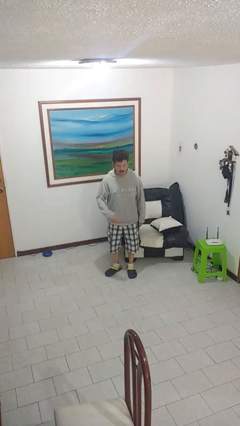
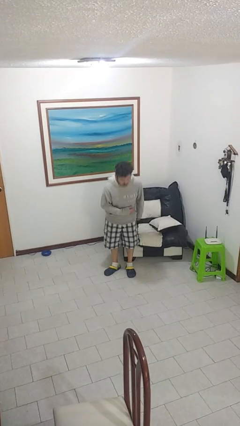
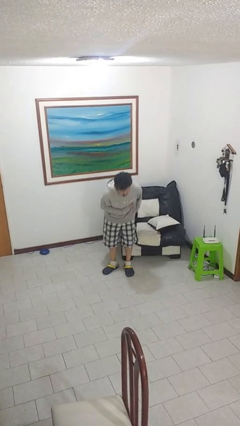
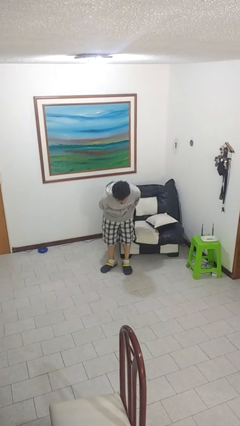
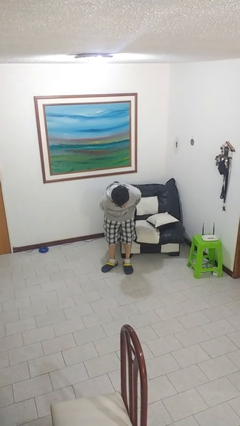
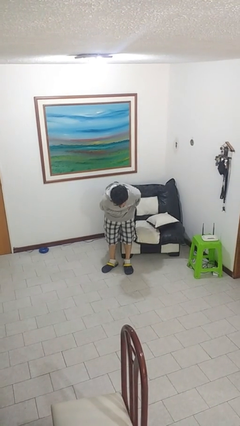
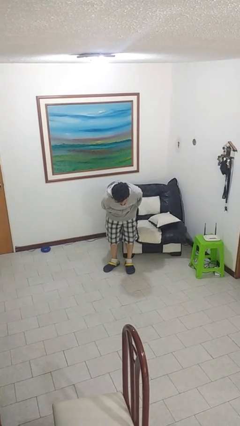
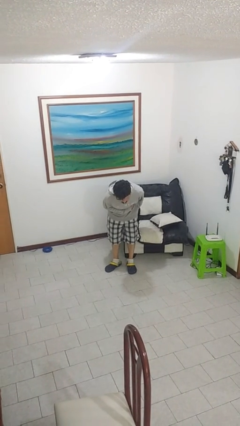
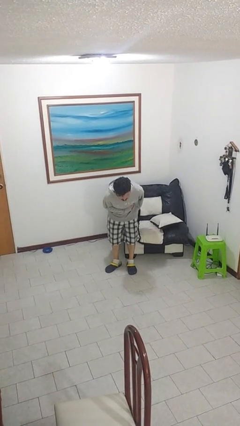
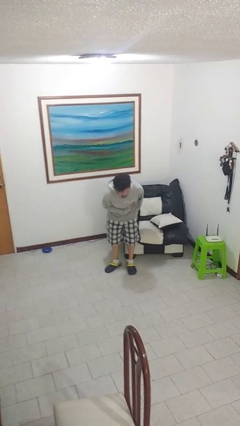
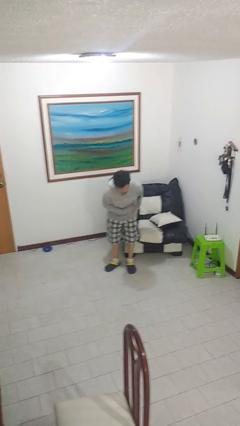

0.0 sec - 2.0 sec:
person bows

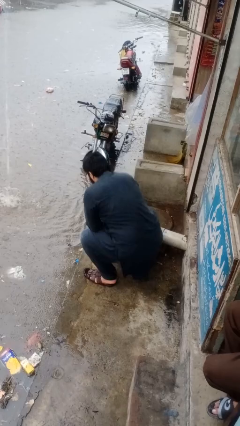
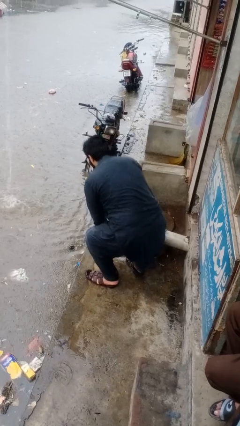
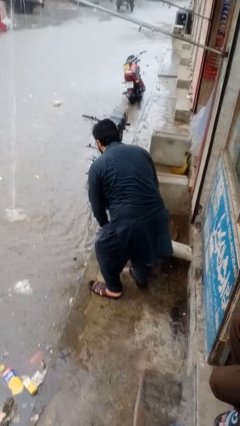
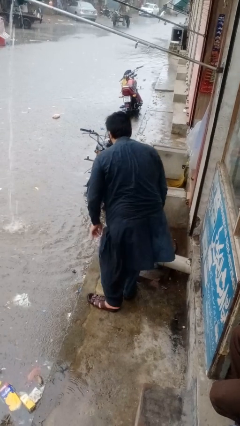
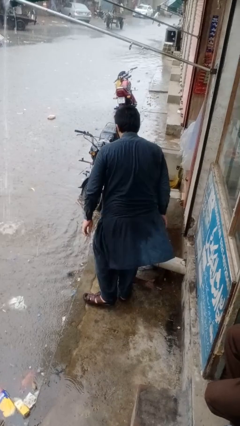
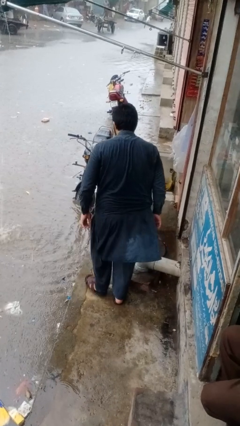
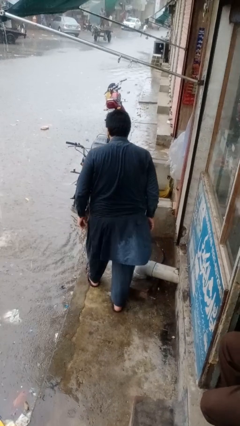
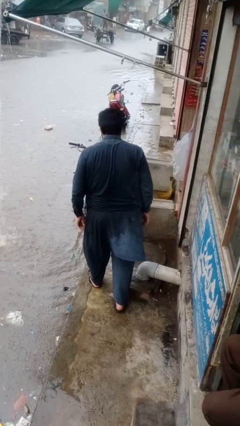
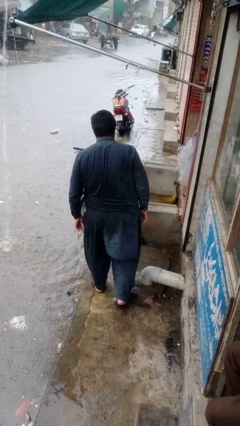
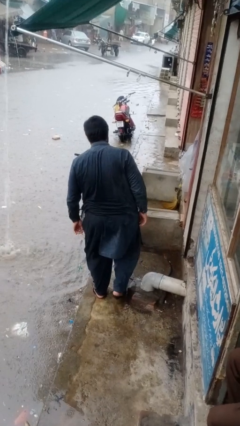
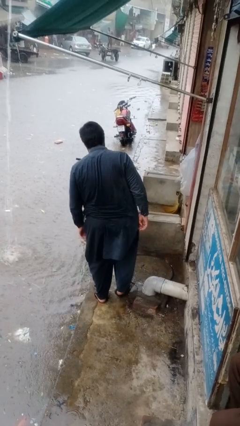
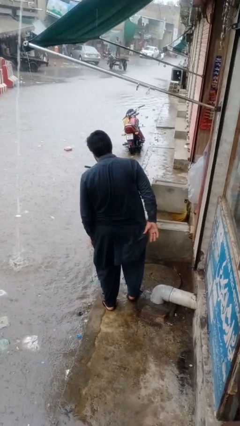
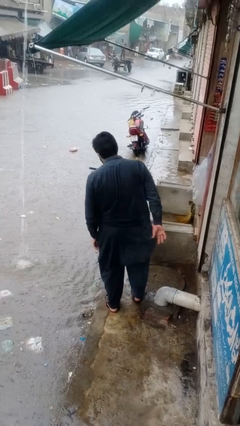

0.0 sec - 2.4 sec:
person stands up from floor

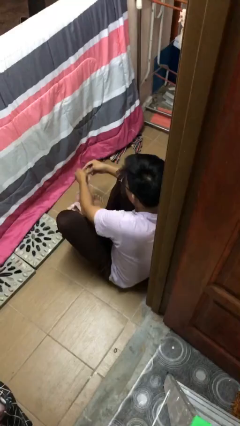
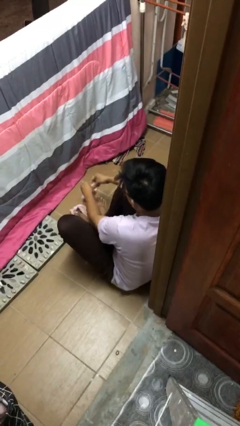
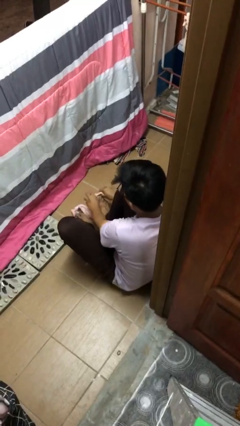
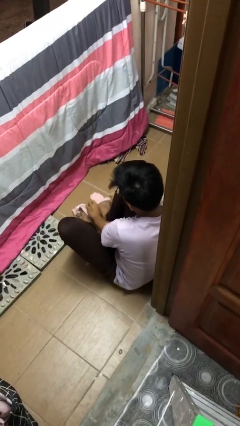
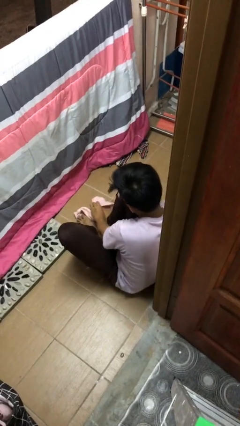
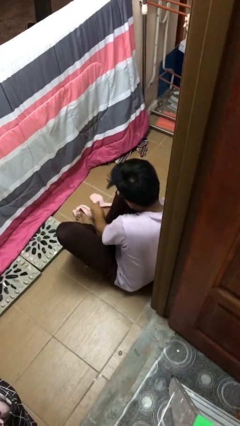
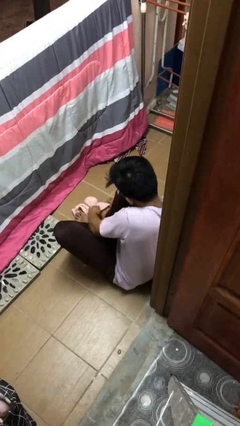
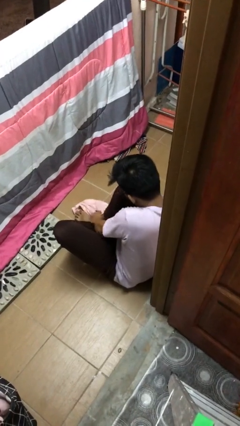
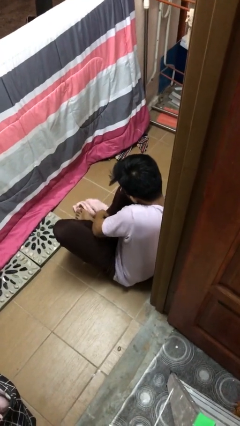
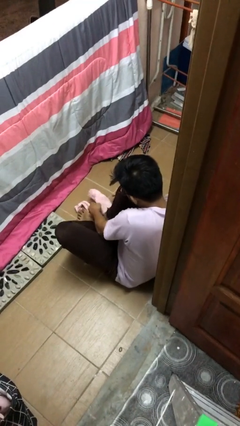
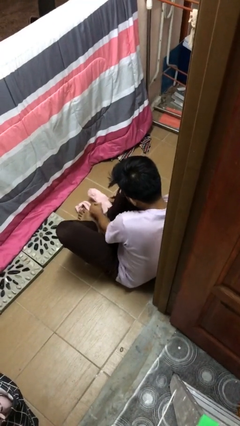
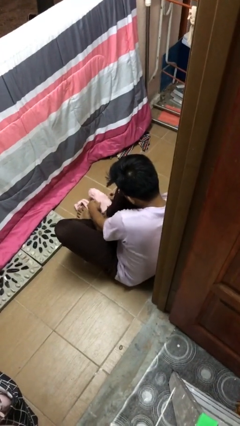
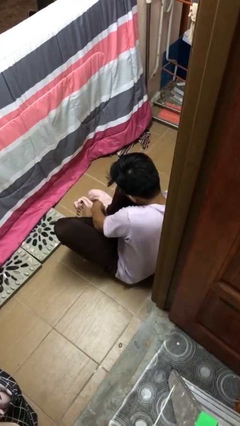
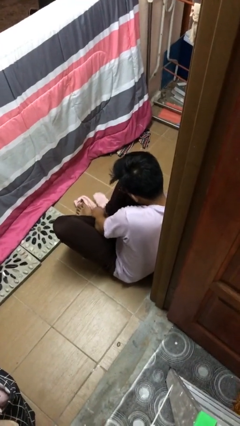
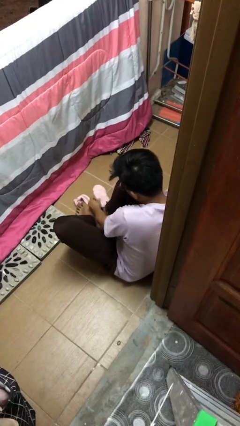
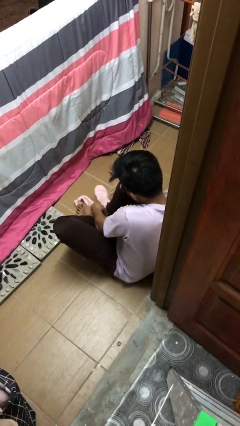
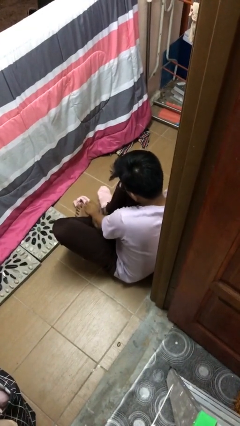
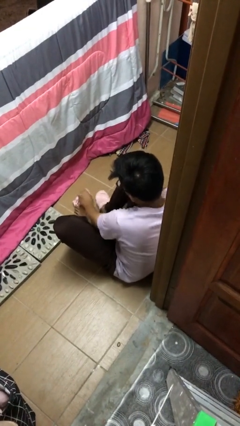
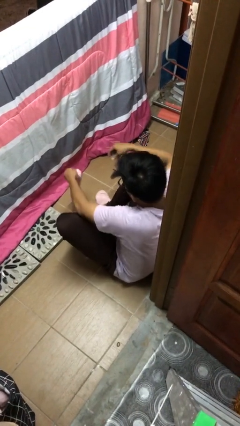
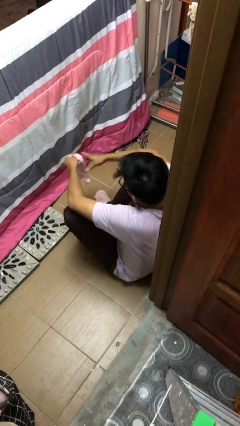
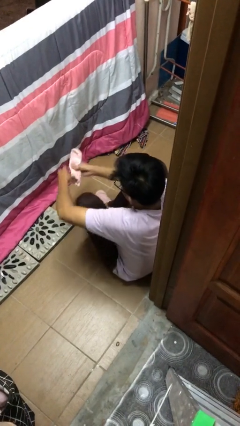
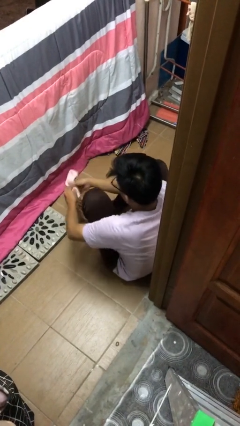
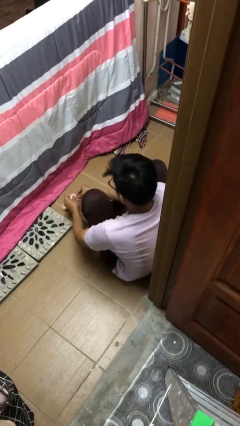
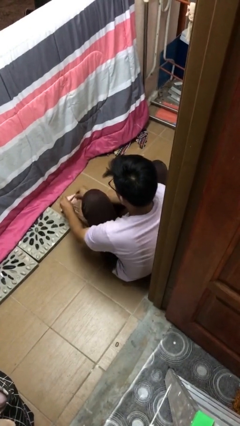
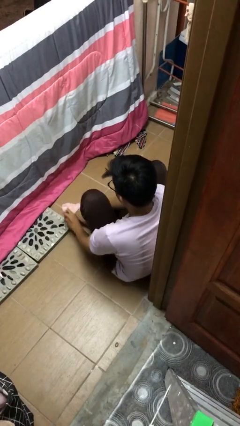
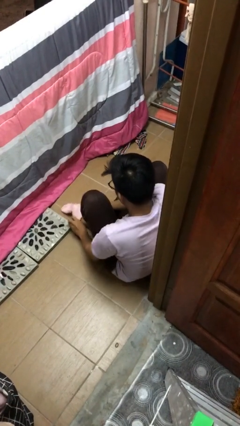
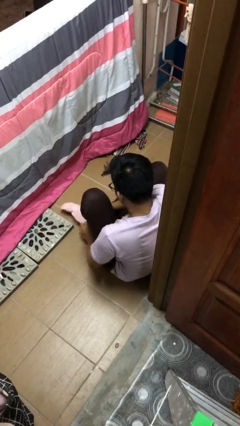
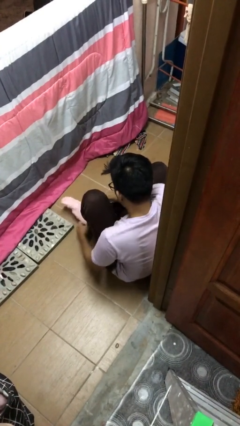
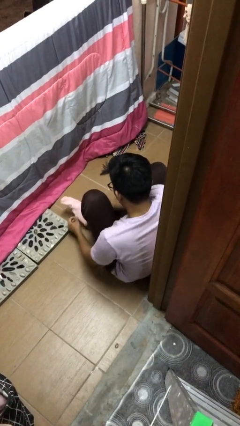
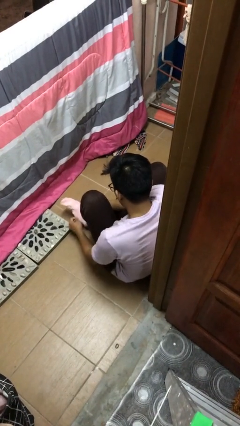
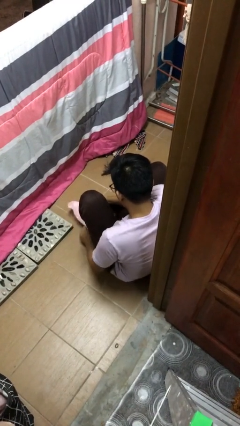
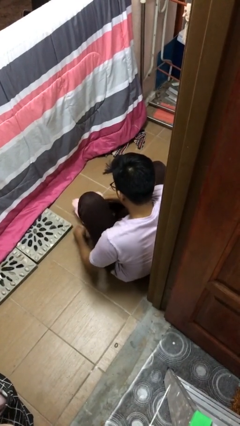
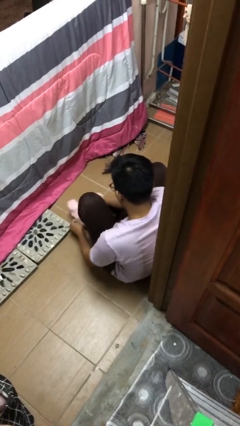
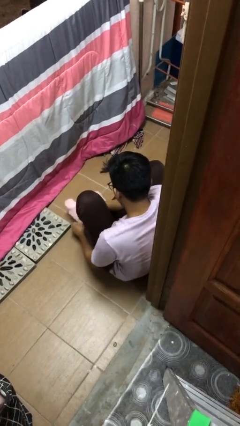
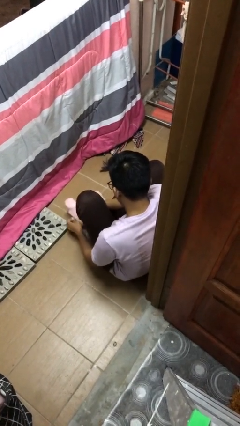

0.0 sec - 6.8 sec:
person puts on socks

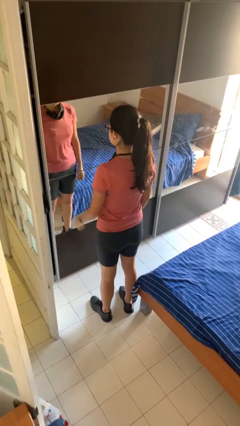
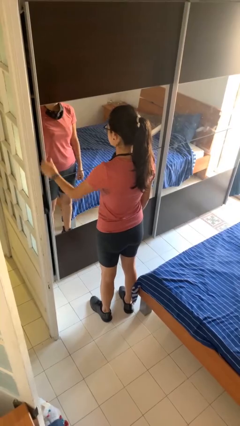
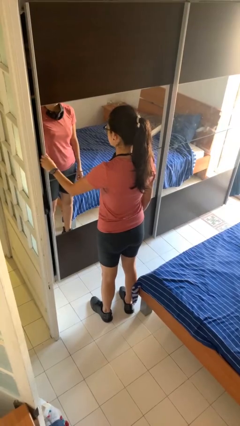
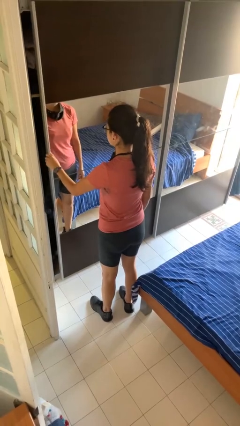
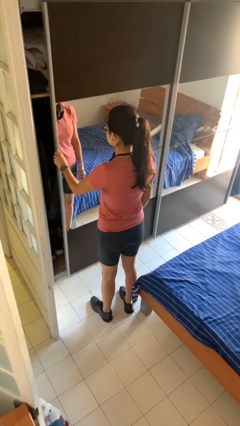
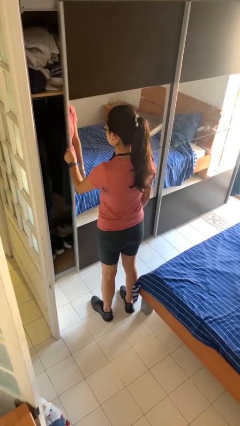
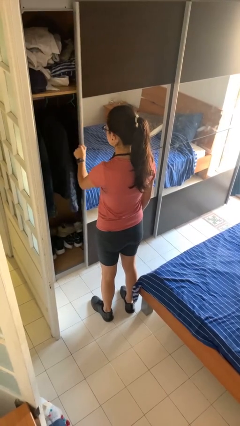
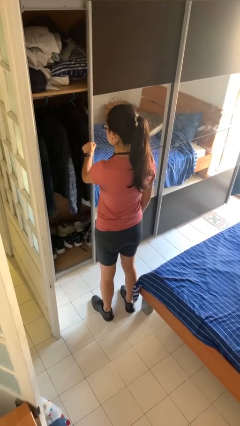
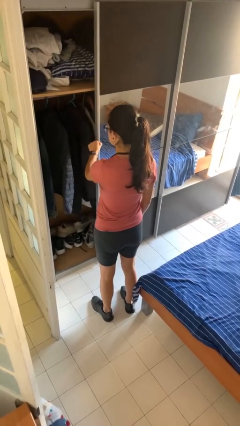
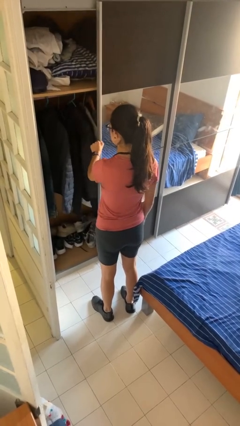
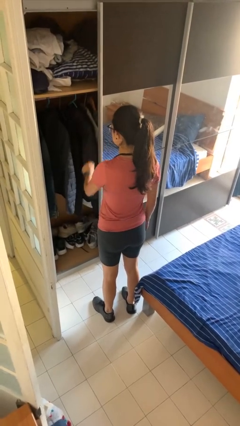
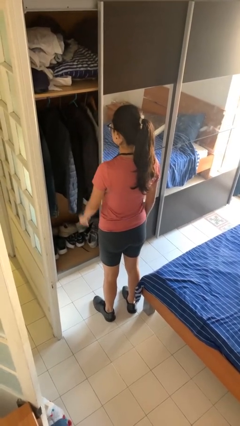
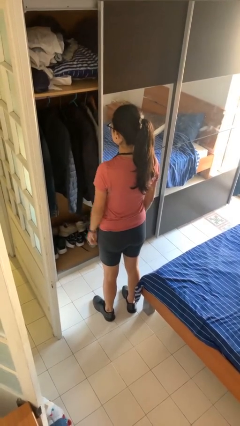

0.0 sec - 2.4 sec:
person opens dresser drawer

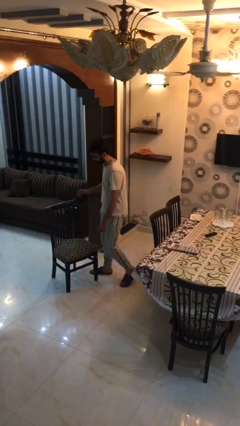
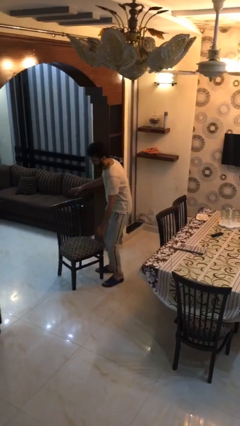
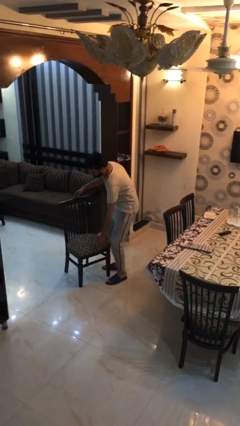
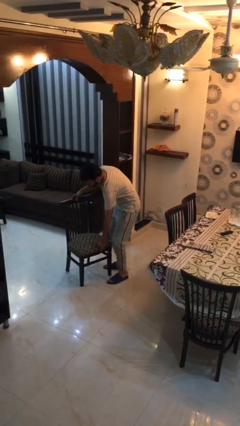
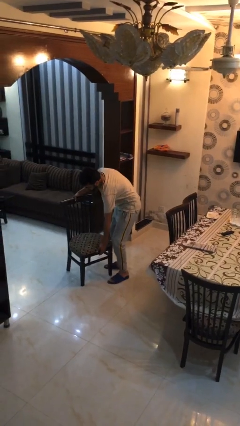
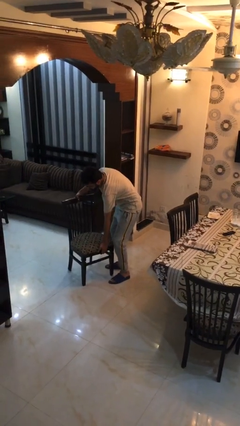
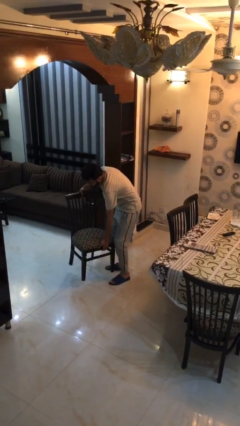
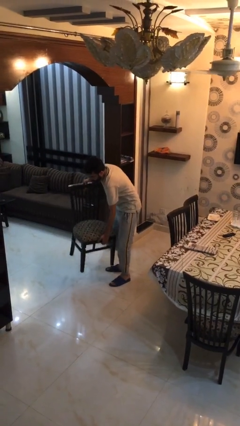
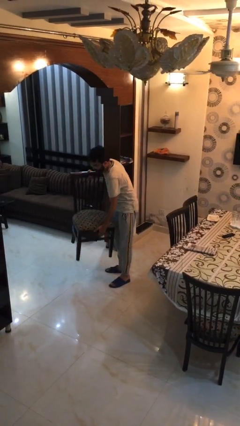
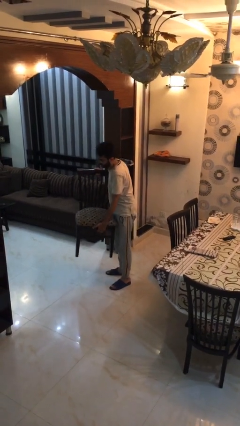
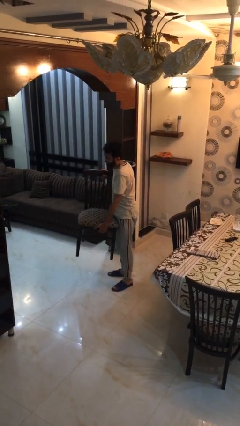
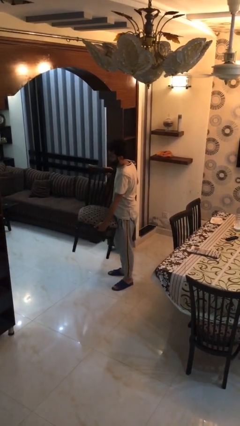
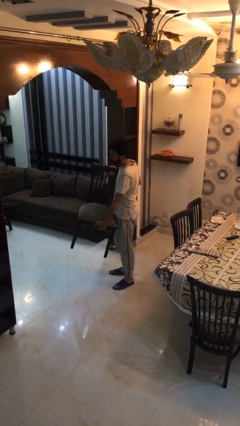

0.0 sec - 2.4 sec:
person picks up object from floor

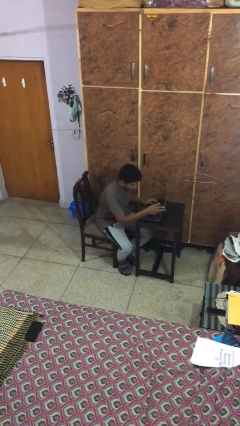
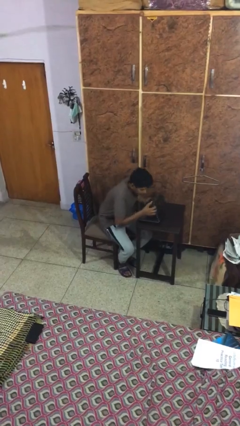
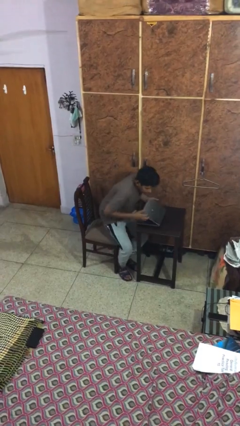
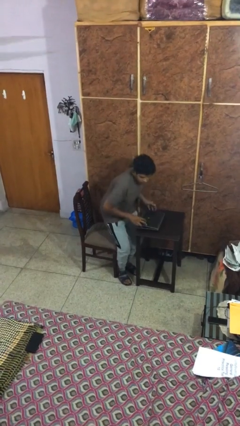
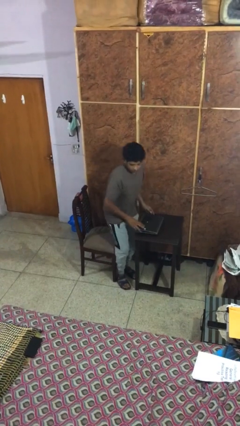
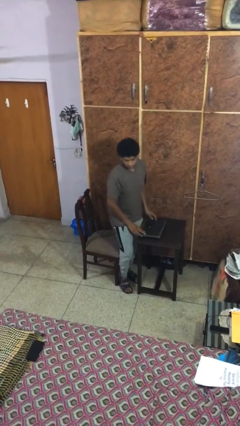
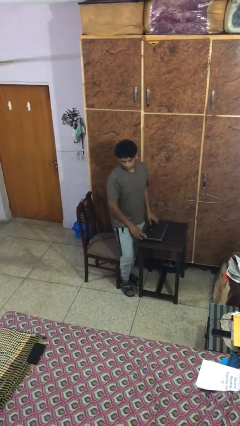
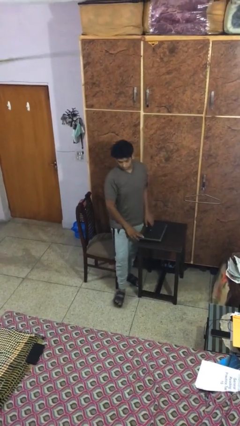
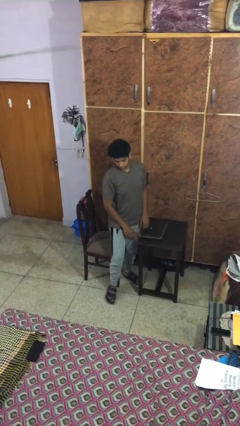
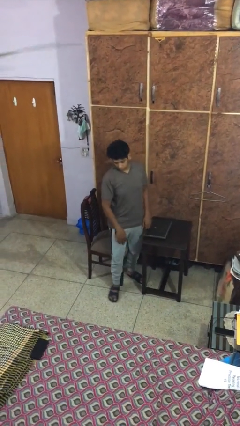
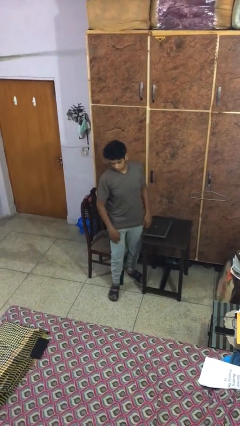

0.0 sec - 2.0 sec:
person stands up
